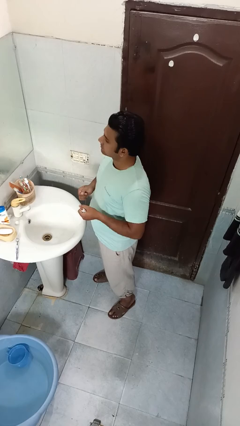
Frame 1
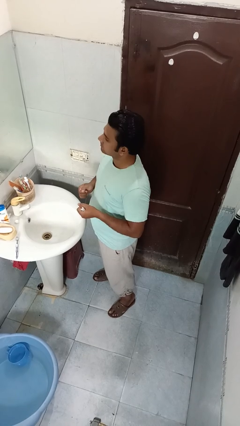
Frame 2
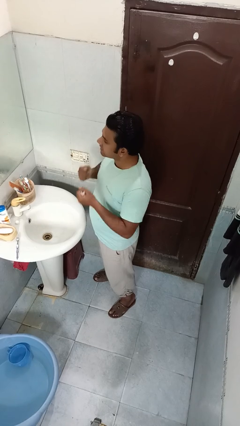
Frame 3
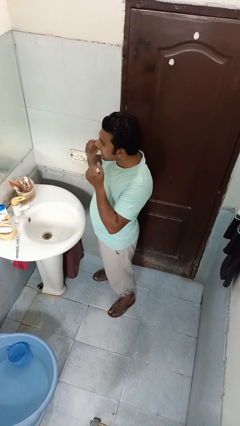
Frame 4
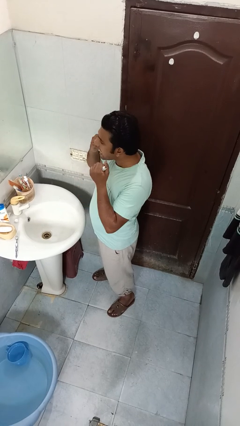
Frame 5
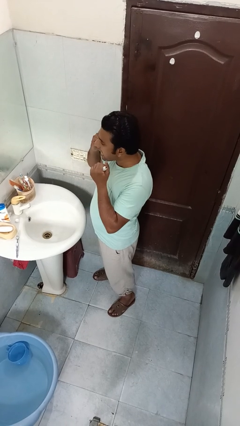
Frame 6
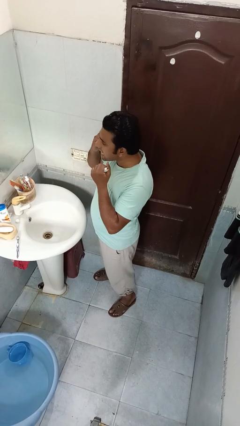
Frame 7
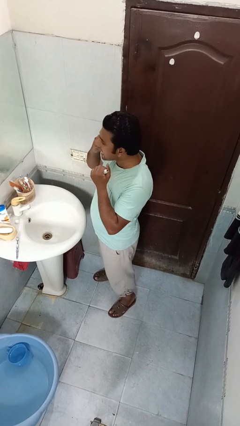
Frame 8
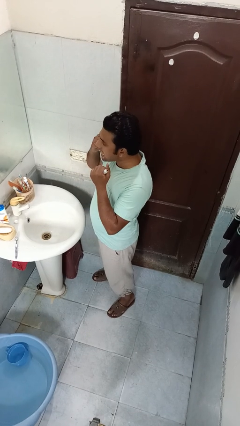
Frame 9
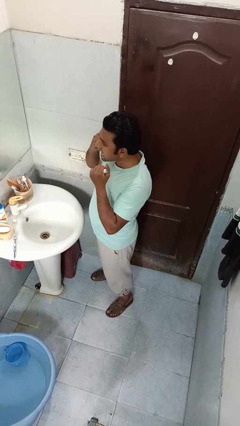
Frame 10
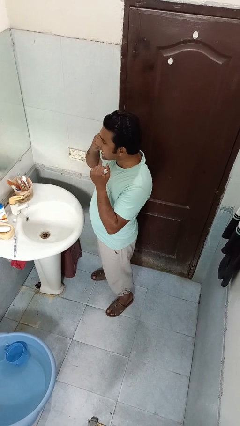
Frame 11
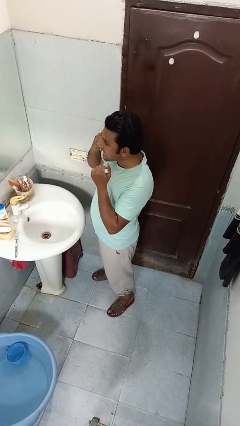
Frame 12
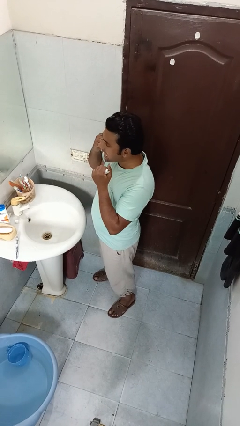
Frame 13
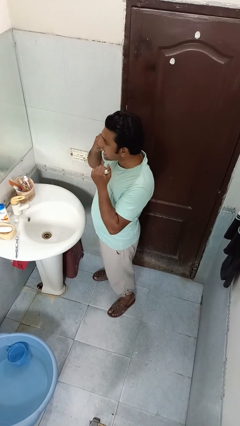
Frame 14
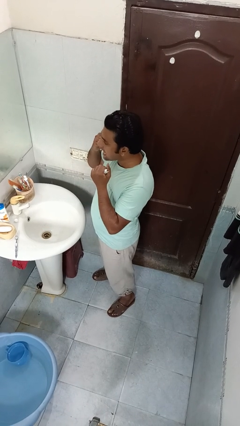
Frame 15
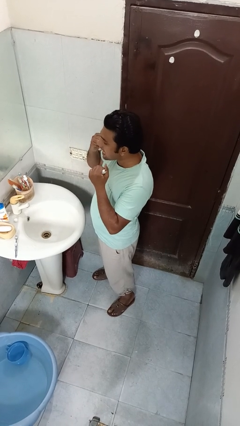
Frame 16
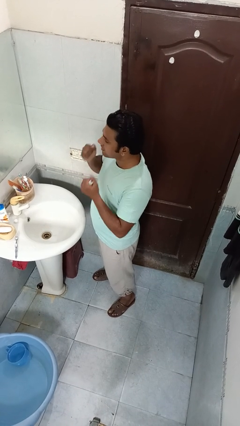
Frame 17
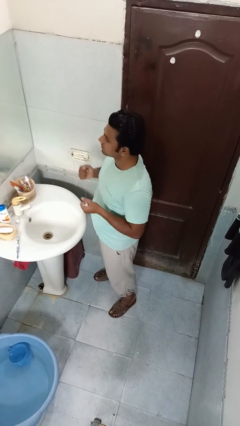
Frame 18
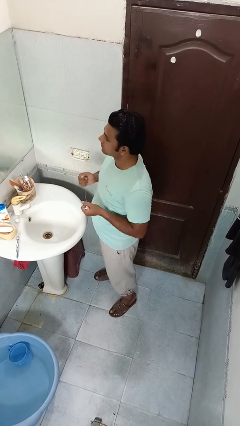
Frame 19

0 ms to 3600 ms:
person flosses

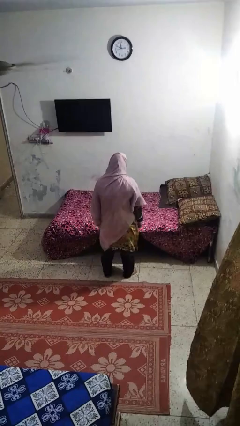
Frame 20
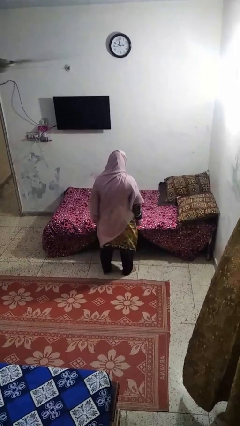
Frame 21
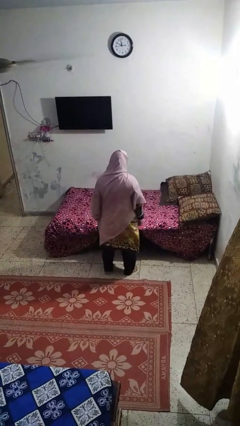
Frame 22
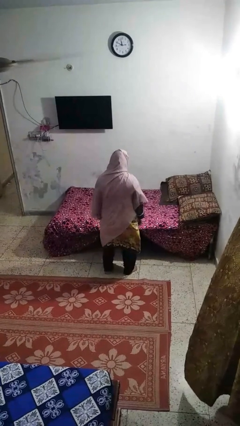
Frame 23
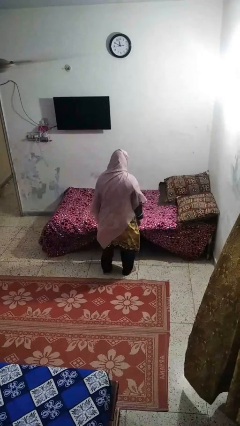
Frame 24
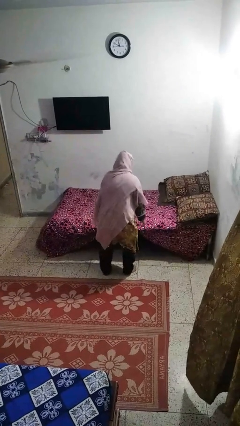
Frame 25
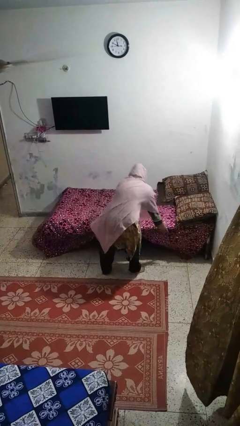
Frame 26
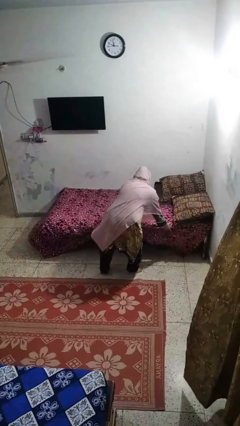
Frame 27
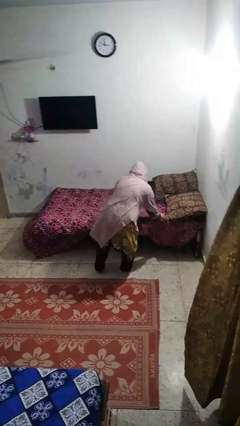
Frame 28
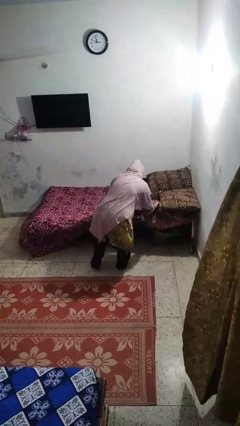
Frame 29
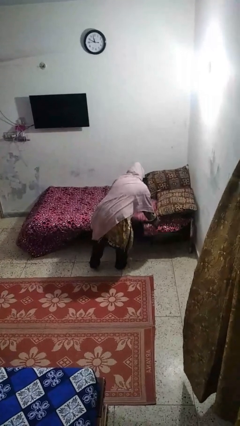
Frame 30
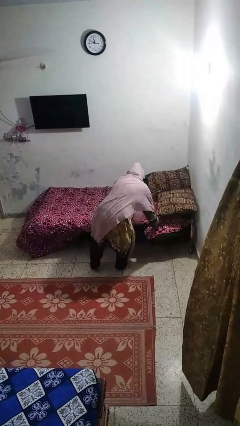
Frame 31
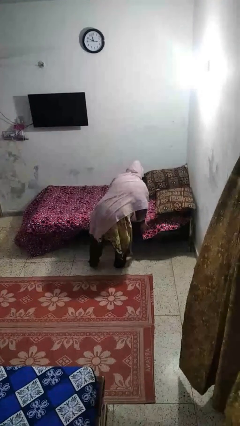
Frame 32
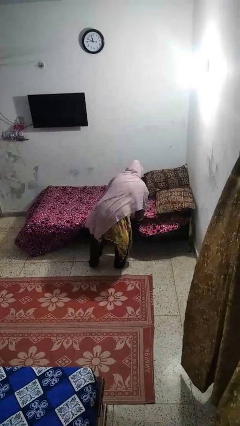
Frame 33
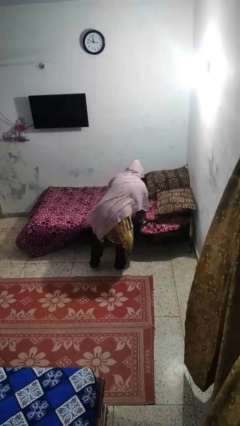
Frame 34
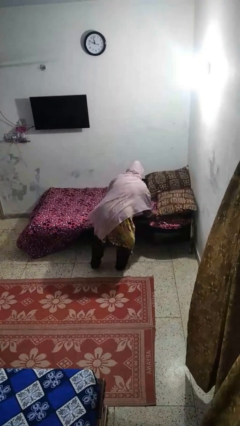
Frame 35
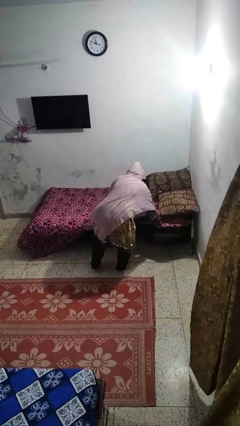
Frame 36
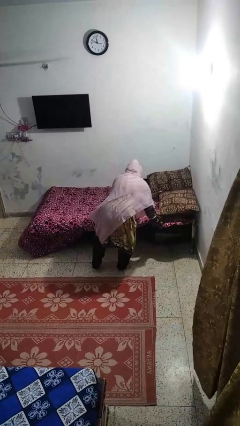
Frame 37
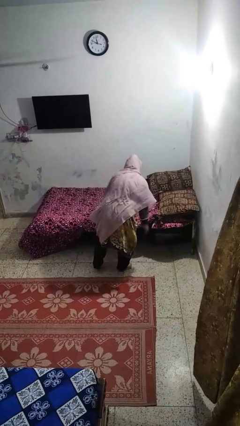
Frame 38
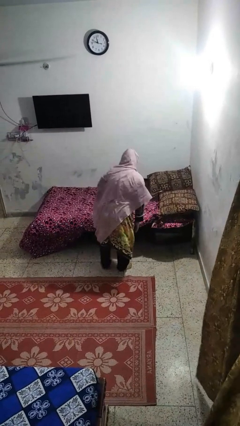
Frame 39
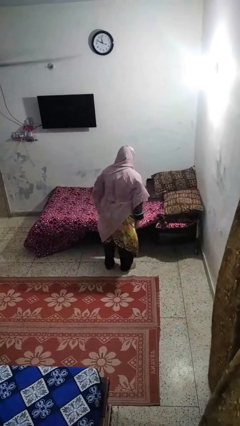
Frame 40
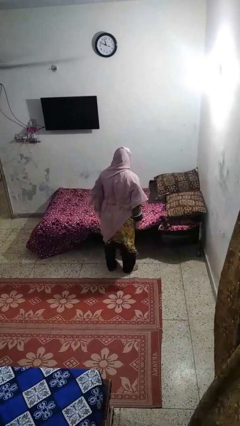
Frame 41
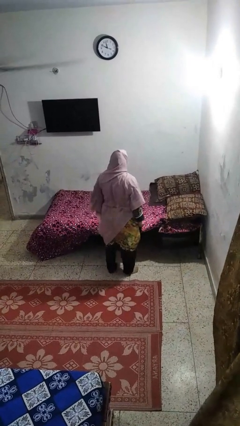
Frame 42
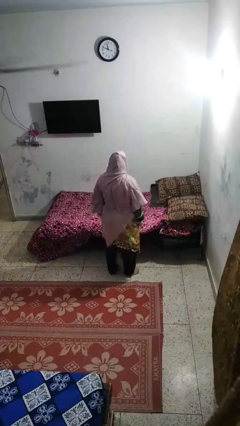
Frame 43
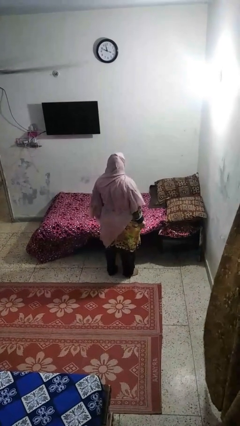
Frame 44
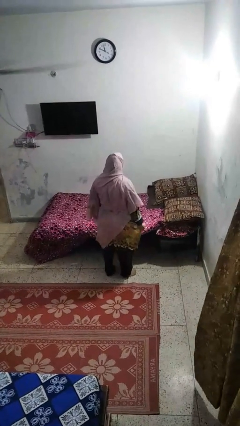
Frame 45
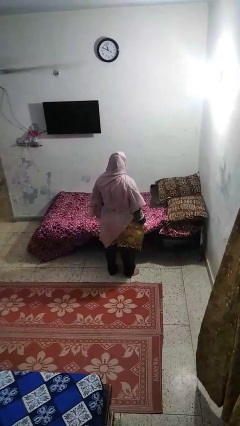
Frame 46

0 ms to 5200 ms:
person makes bed

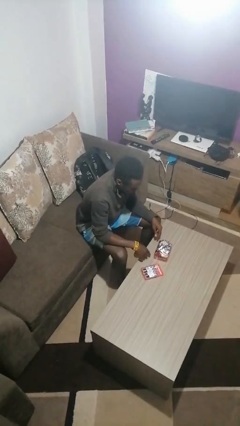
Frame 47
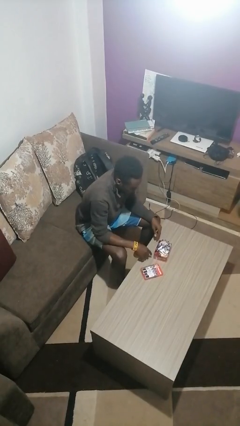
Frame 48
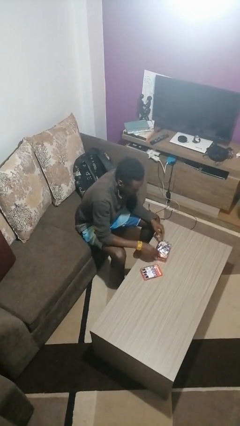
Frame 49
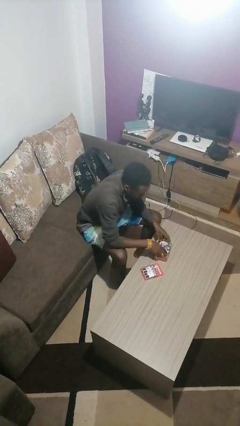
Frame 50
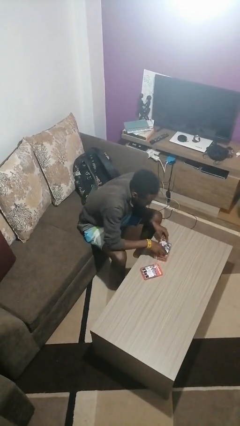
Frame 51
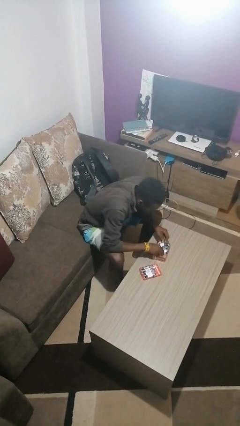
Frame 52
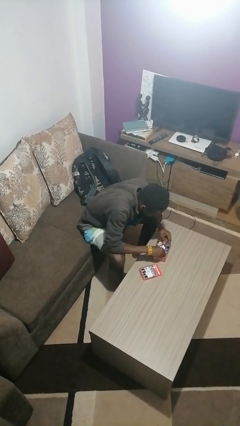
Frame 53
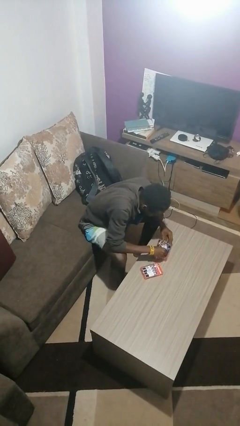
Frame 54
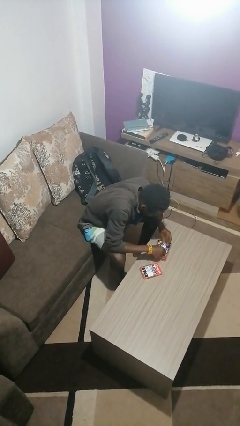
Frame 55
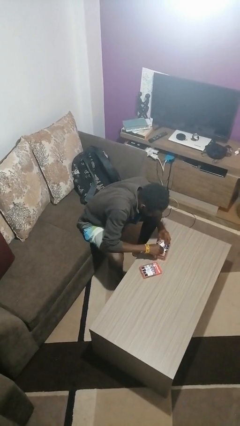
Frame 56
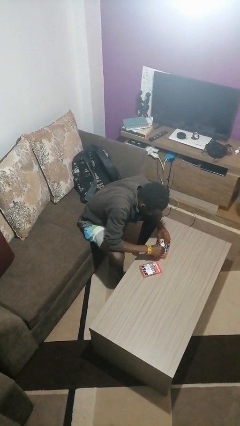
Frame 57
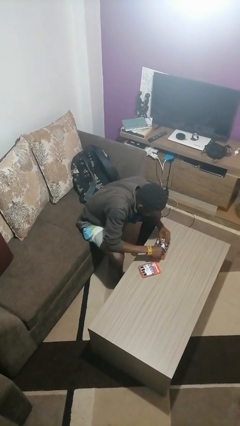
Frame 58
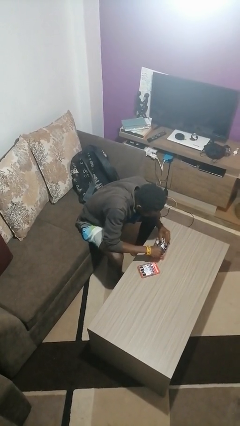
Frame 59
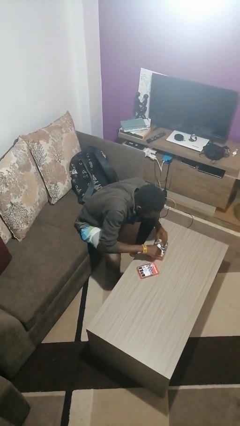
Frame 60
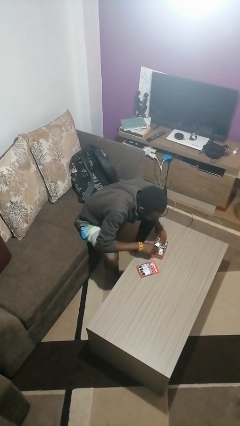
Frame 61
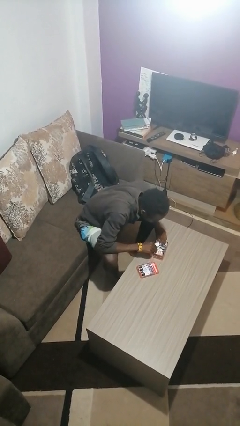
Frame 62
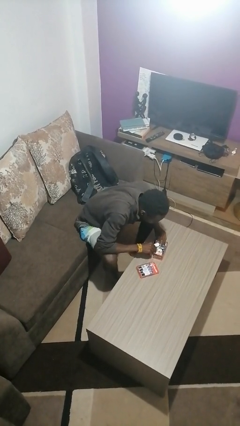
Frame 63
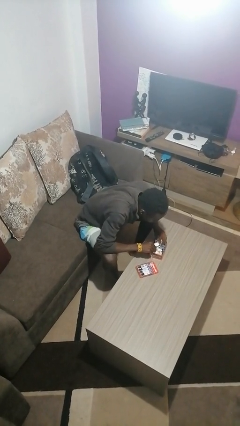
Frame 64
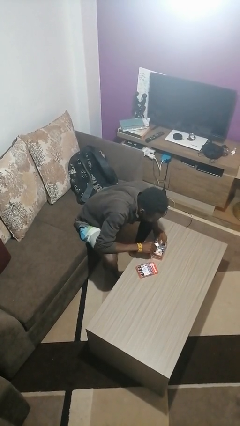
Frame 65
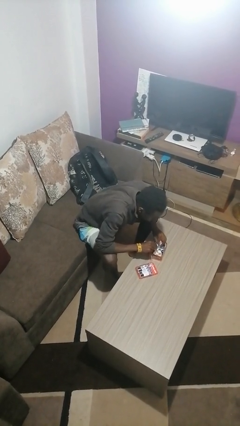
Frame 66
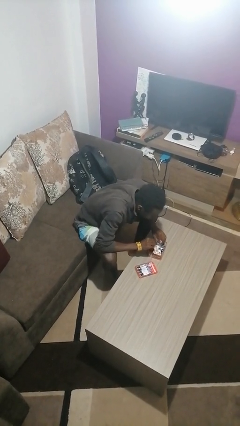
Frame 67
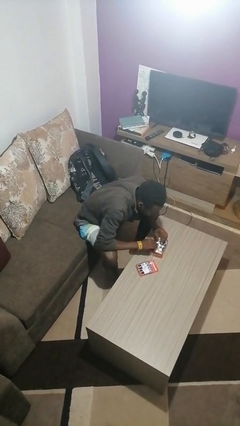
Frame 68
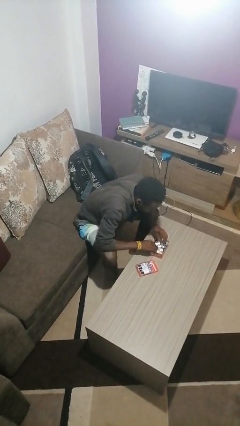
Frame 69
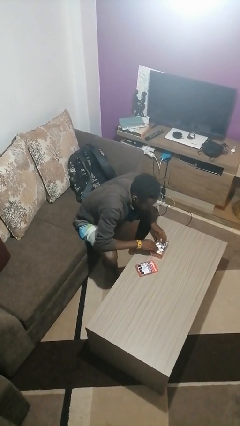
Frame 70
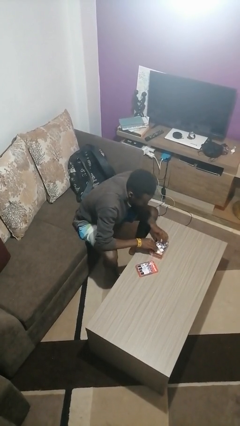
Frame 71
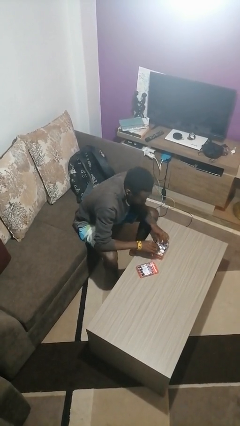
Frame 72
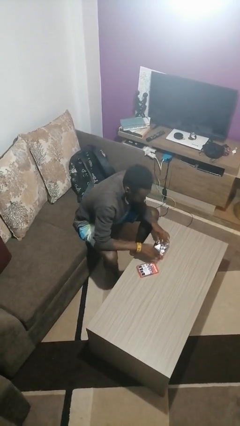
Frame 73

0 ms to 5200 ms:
person searches jewelry box

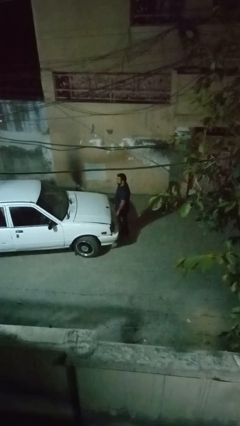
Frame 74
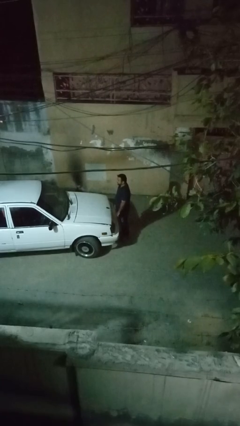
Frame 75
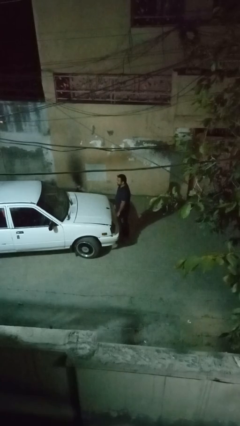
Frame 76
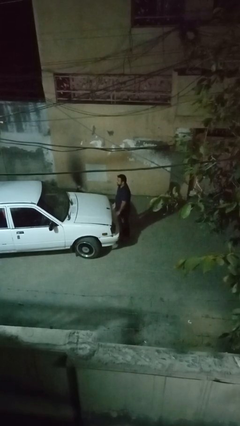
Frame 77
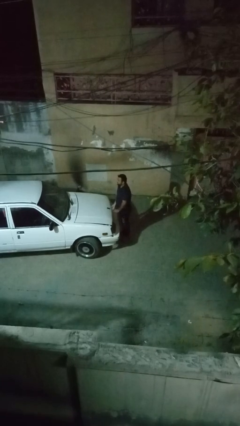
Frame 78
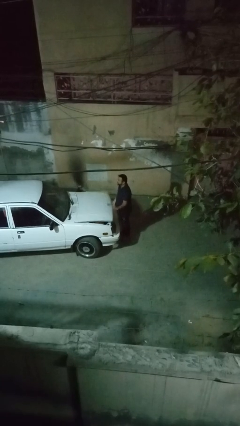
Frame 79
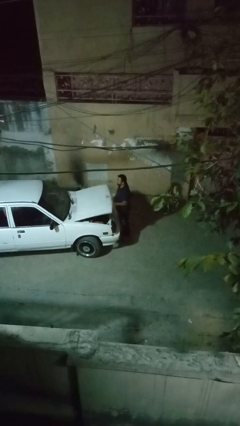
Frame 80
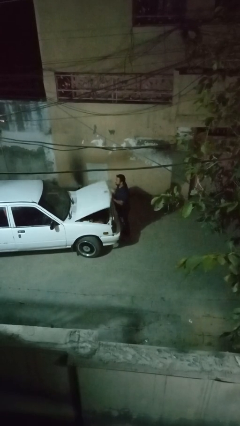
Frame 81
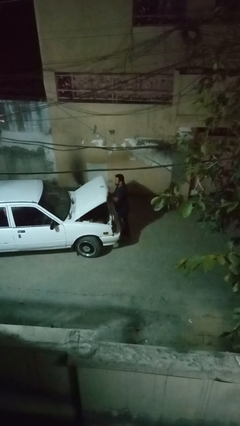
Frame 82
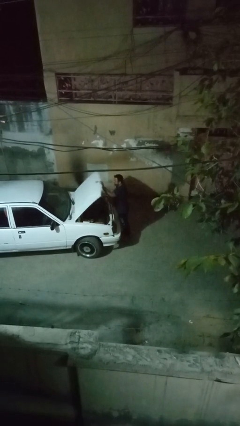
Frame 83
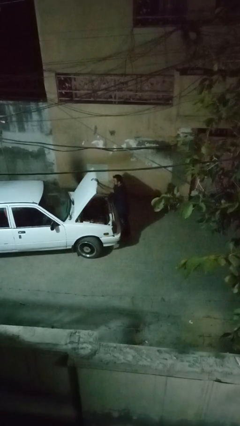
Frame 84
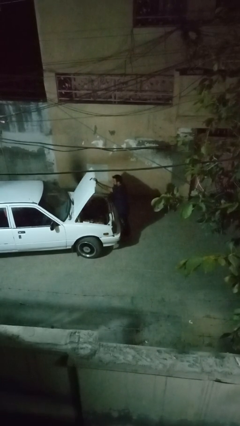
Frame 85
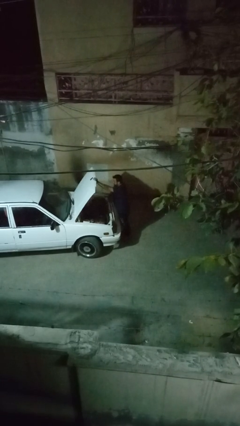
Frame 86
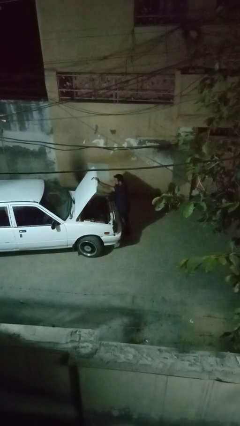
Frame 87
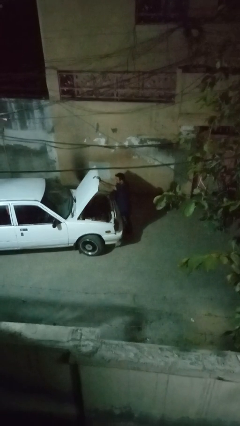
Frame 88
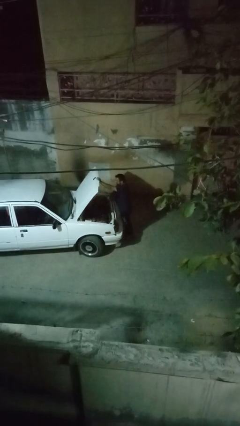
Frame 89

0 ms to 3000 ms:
person opens car hood

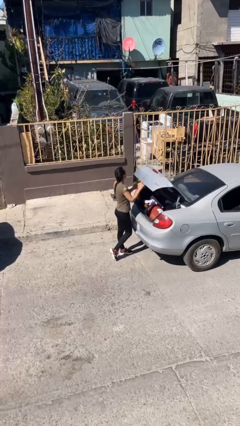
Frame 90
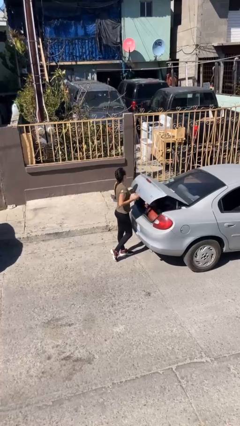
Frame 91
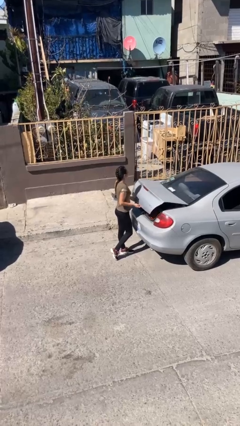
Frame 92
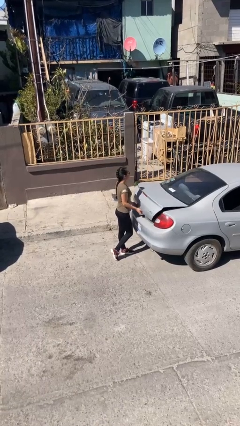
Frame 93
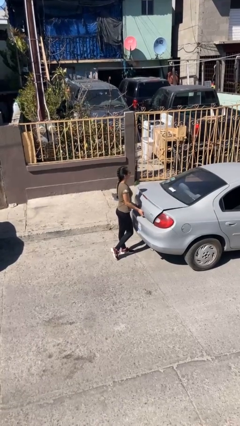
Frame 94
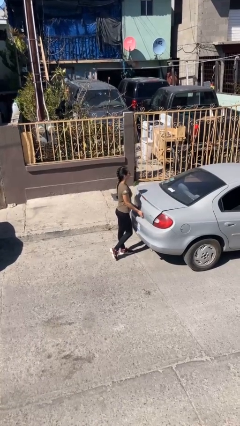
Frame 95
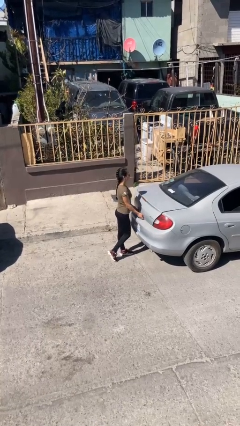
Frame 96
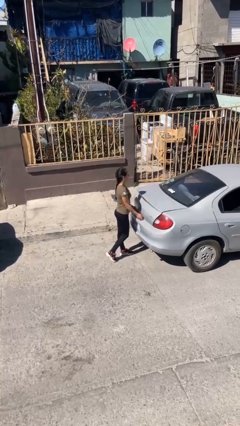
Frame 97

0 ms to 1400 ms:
person closes car trunk
